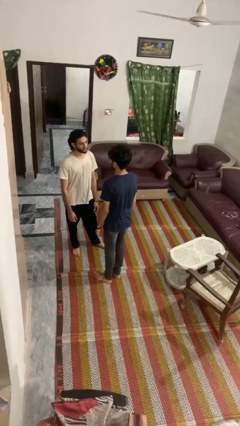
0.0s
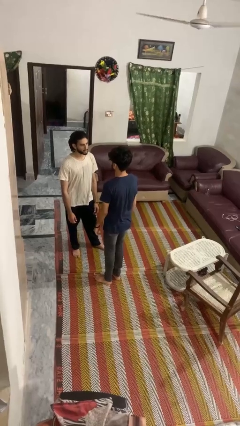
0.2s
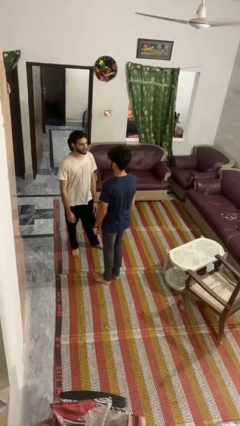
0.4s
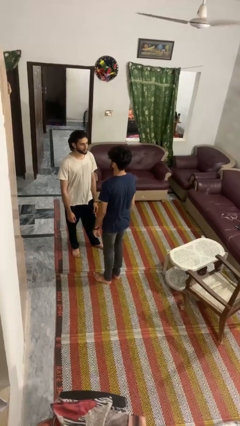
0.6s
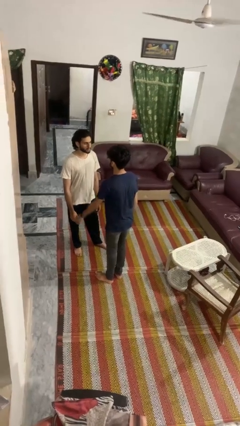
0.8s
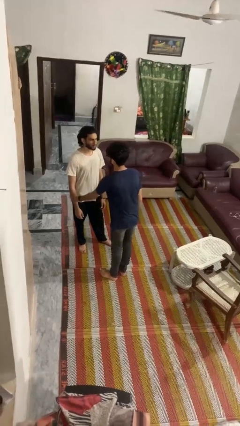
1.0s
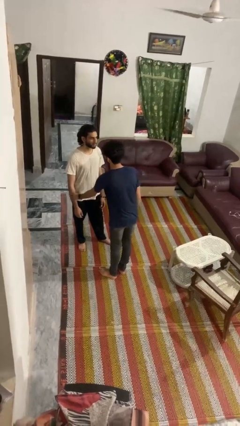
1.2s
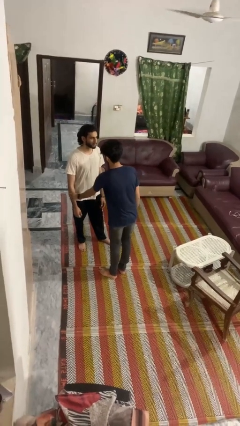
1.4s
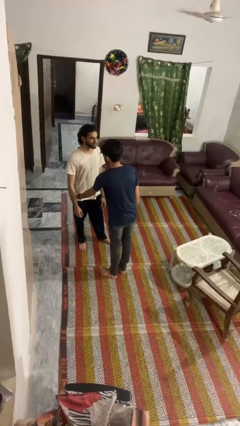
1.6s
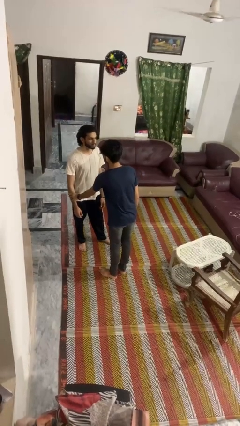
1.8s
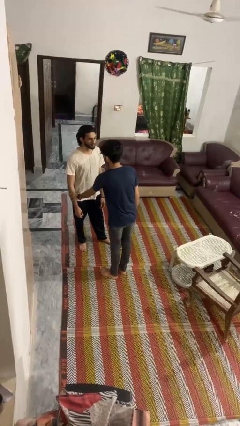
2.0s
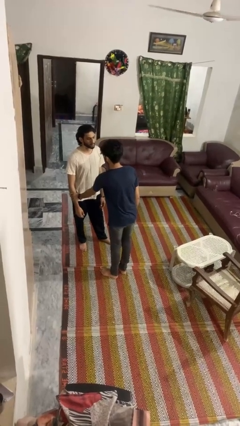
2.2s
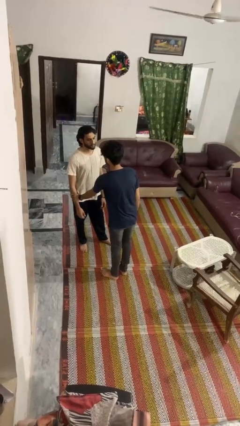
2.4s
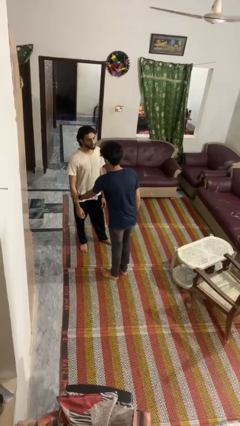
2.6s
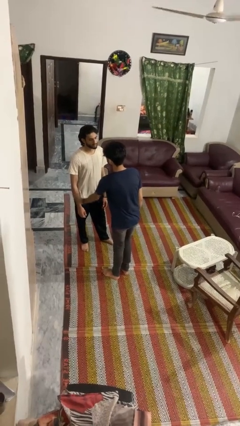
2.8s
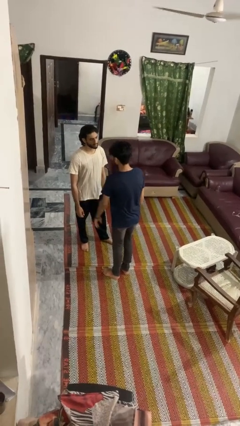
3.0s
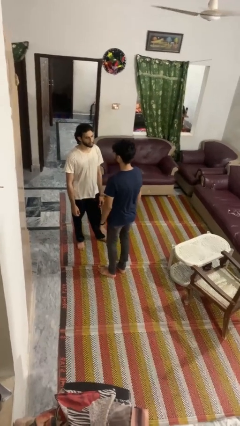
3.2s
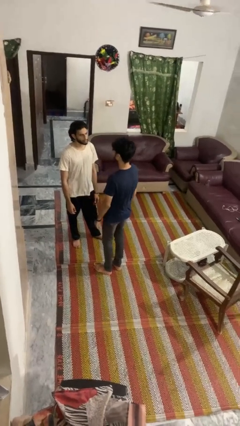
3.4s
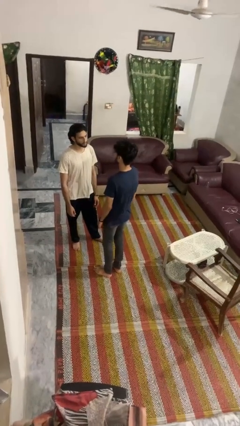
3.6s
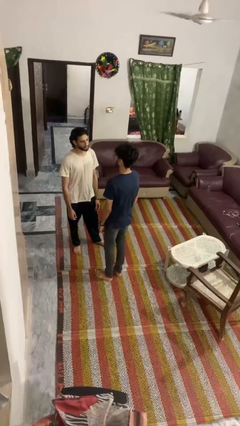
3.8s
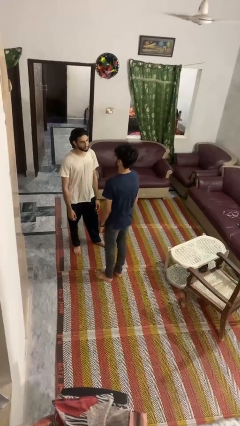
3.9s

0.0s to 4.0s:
person grabs person by forearm

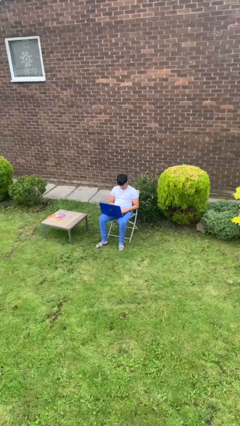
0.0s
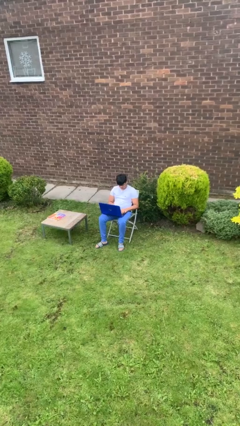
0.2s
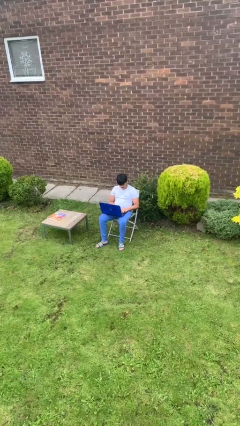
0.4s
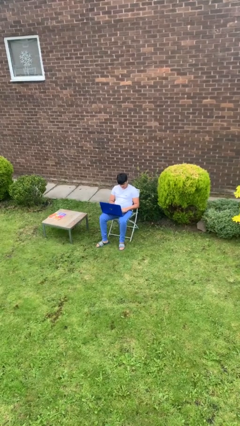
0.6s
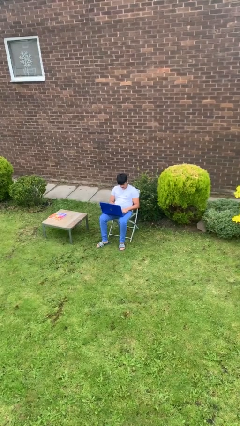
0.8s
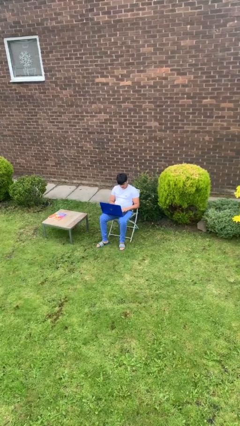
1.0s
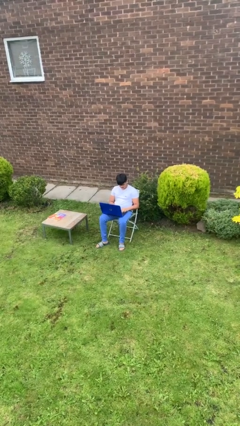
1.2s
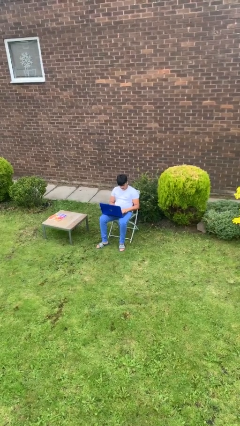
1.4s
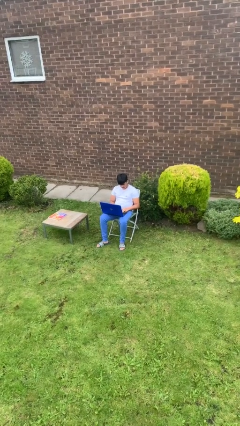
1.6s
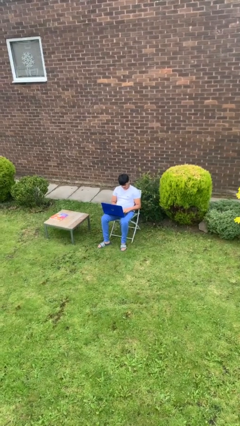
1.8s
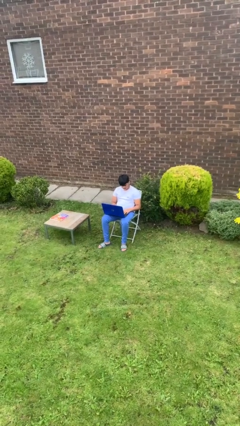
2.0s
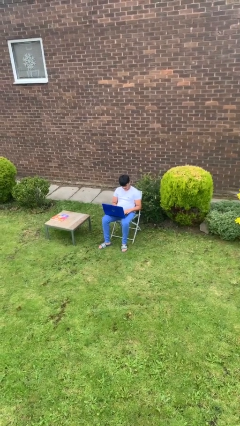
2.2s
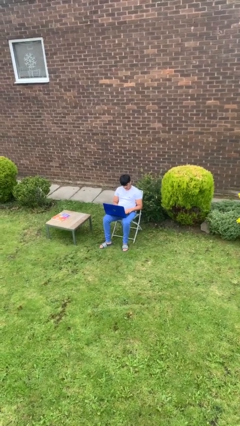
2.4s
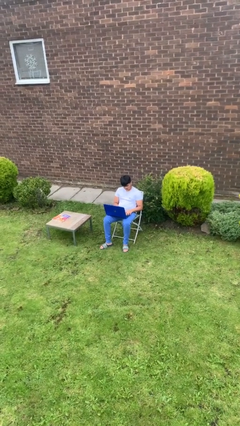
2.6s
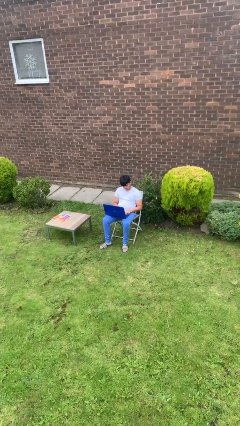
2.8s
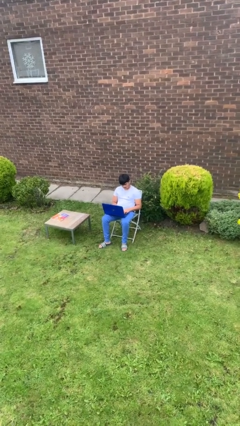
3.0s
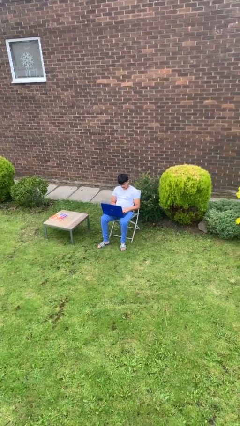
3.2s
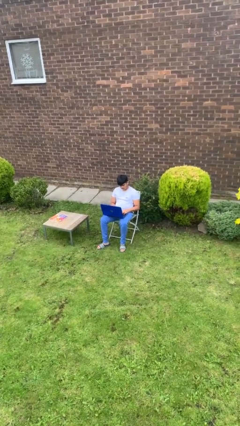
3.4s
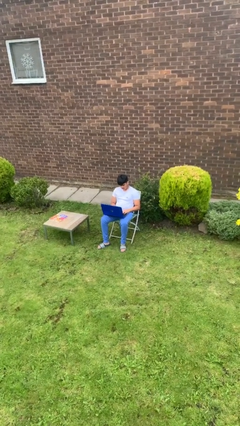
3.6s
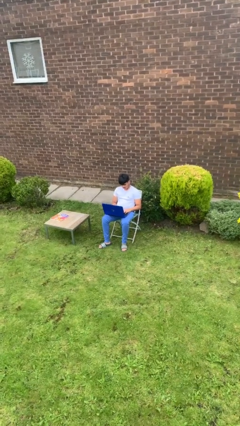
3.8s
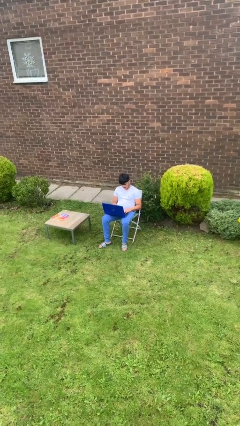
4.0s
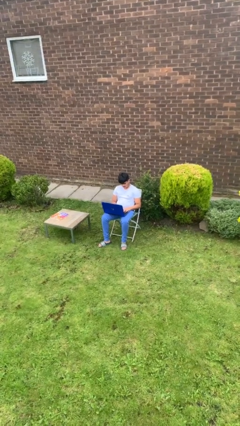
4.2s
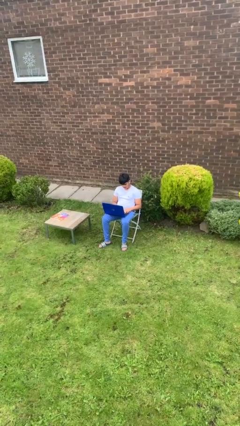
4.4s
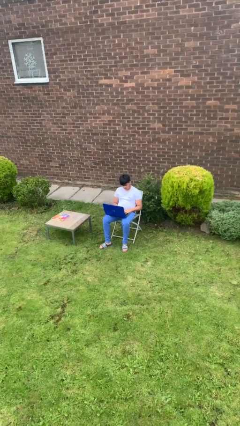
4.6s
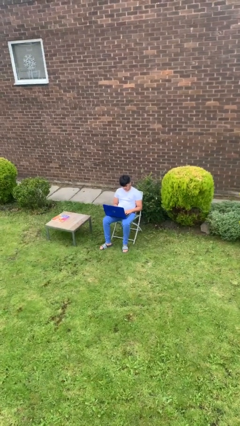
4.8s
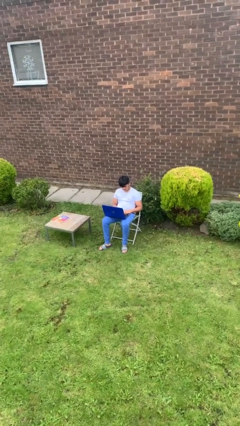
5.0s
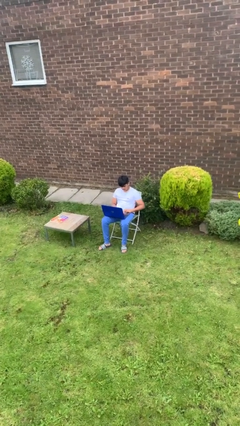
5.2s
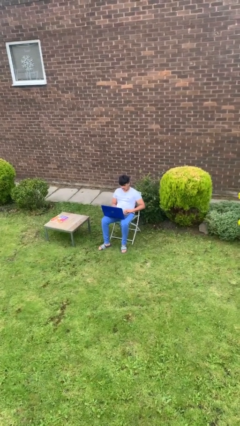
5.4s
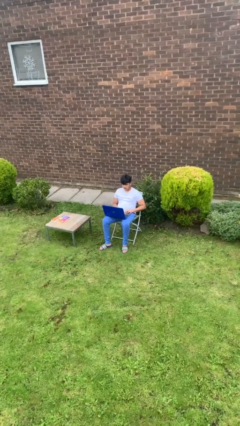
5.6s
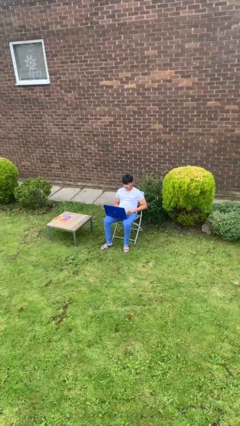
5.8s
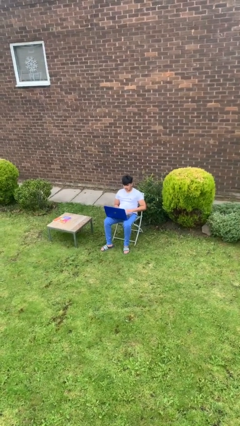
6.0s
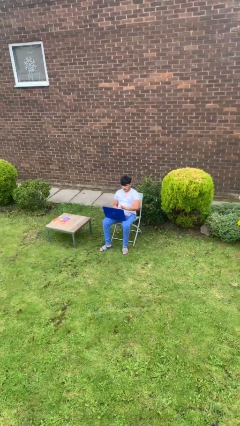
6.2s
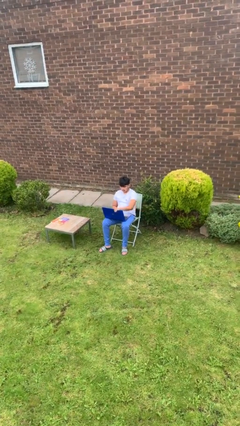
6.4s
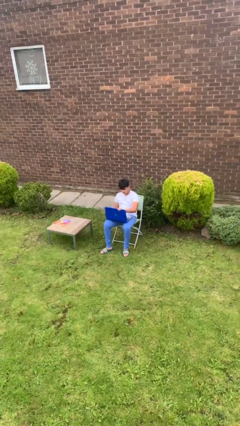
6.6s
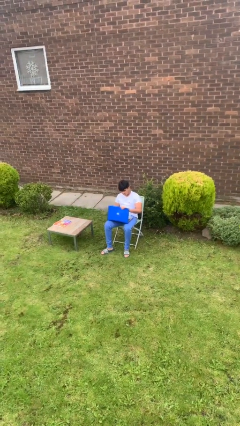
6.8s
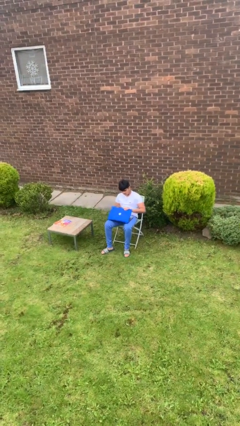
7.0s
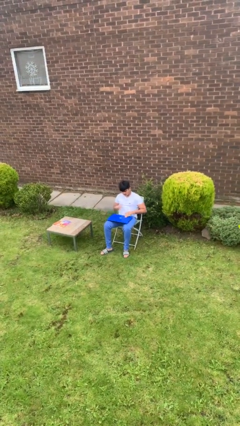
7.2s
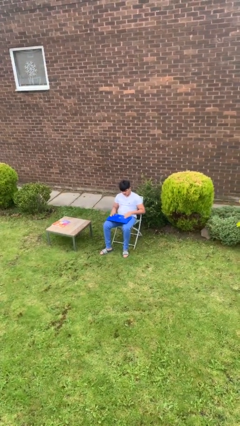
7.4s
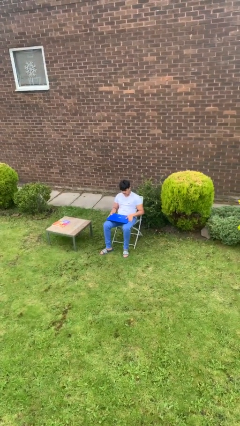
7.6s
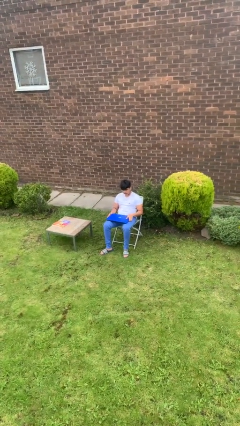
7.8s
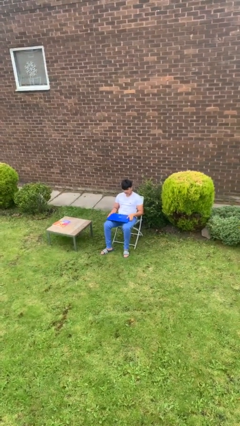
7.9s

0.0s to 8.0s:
person interacts with laptop

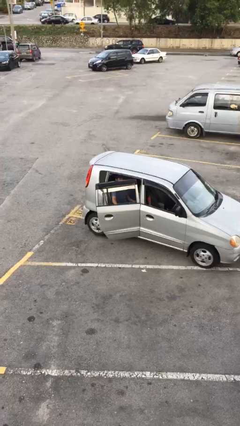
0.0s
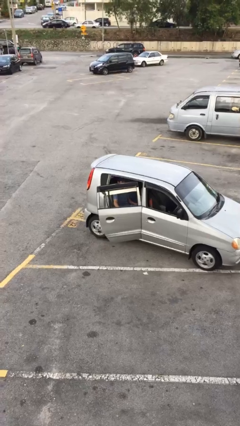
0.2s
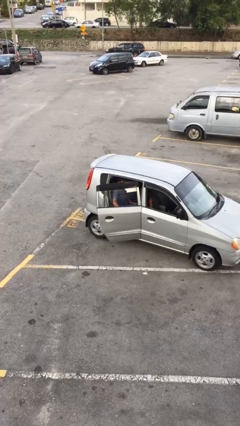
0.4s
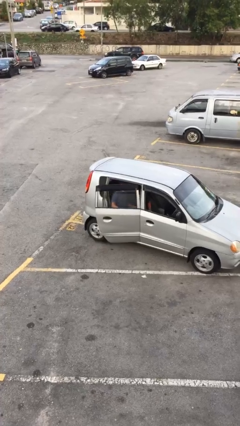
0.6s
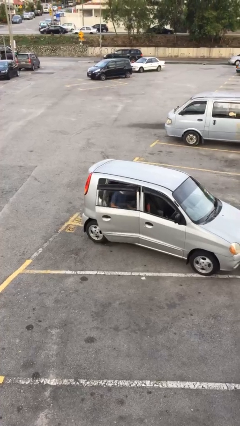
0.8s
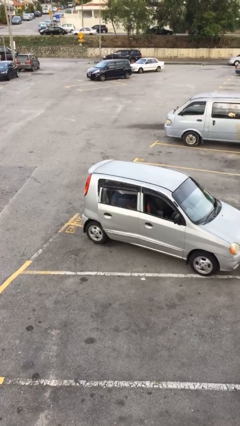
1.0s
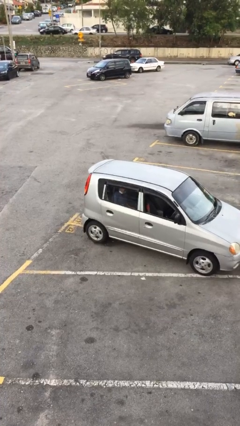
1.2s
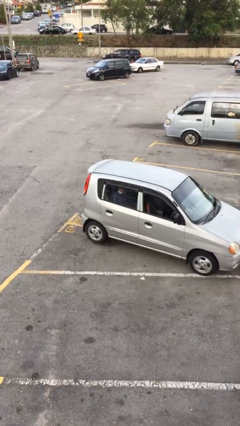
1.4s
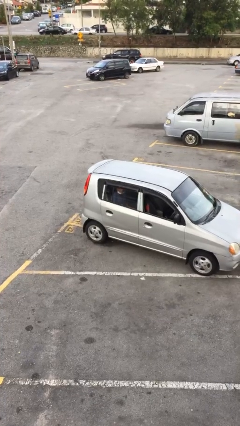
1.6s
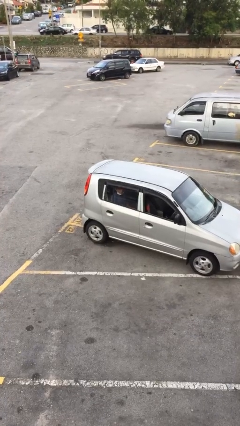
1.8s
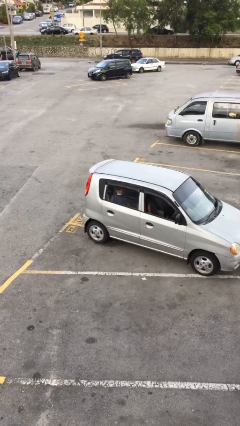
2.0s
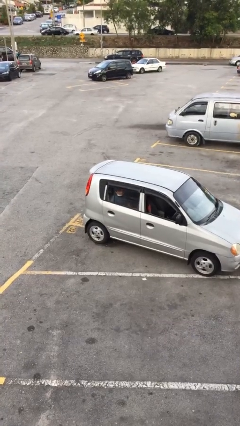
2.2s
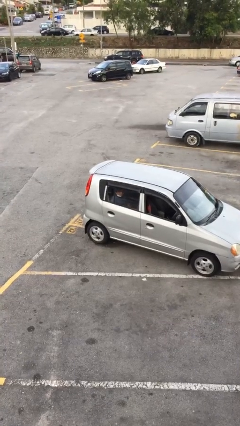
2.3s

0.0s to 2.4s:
person closes car door

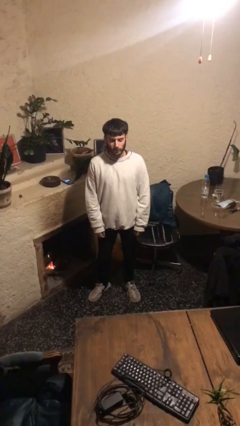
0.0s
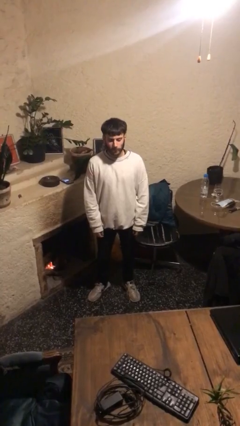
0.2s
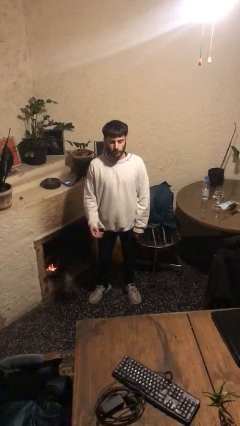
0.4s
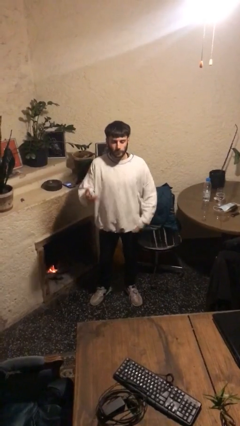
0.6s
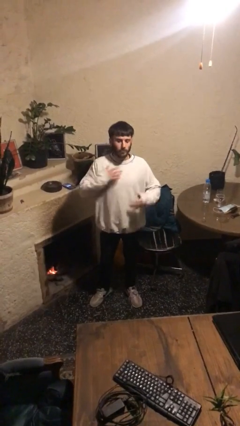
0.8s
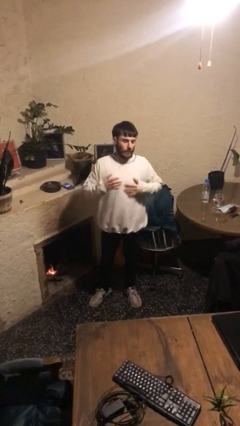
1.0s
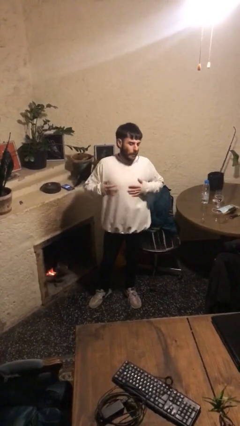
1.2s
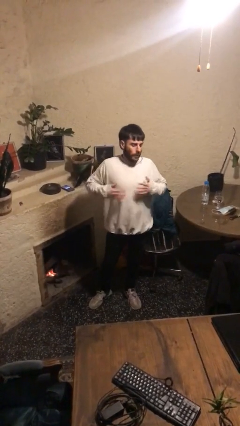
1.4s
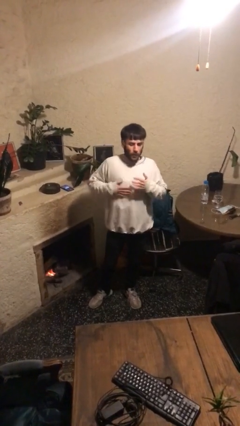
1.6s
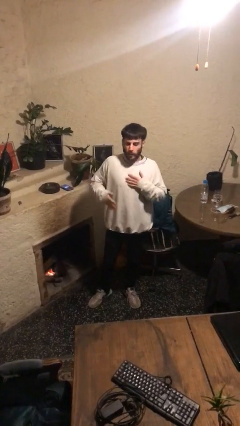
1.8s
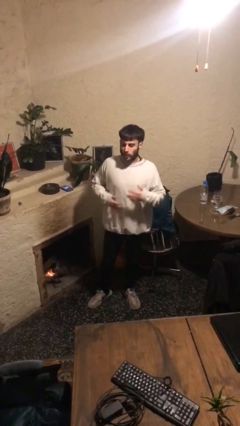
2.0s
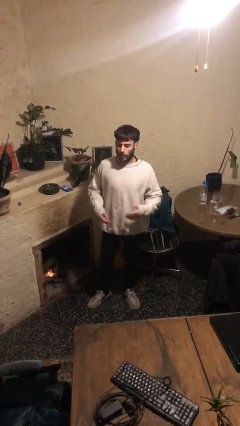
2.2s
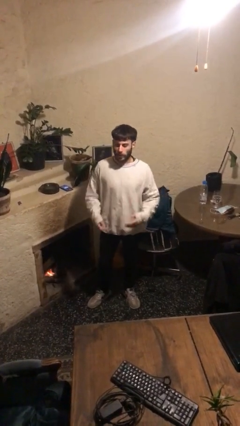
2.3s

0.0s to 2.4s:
person drums on chest

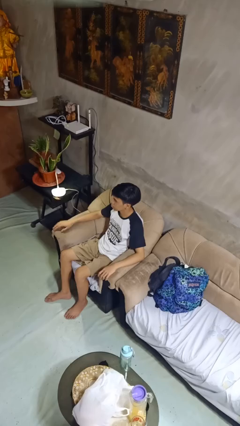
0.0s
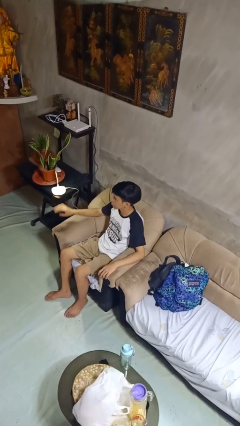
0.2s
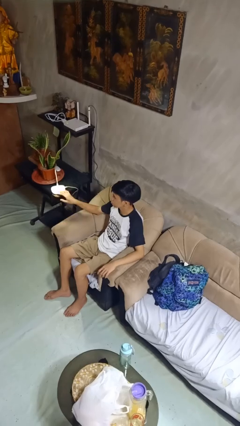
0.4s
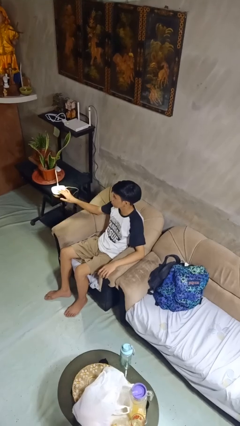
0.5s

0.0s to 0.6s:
person turns off lamp

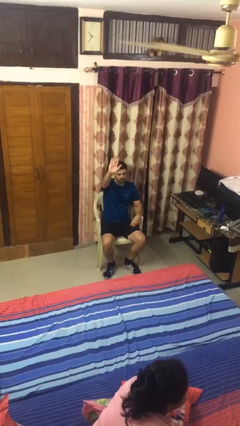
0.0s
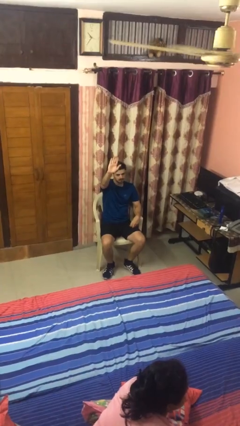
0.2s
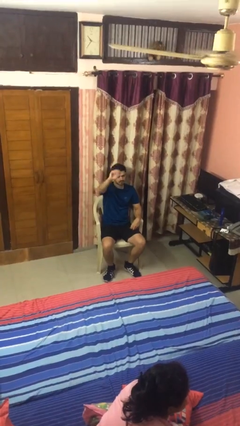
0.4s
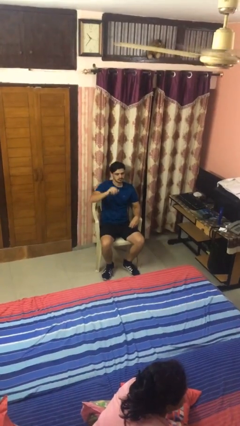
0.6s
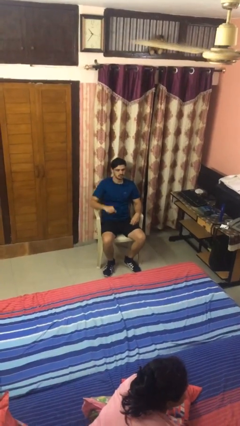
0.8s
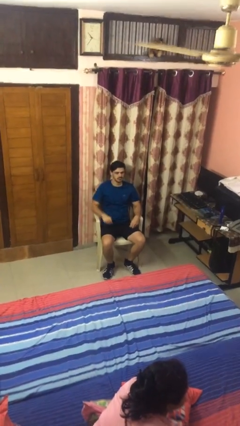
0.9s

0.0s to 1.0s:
person gestures lower hand
